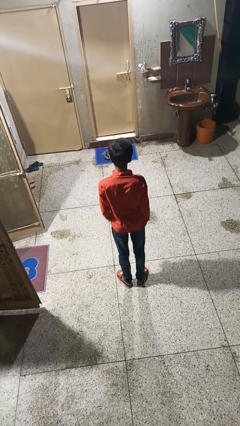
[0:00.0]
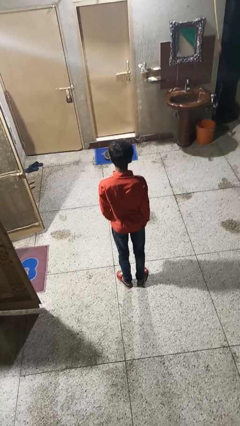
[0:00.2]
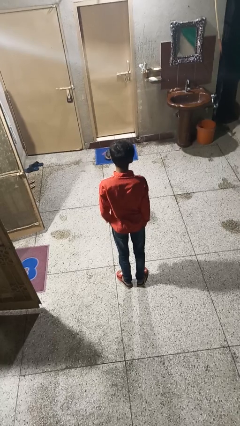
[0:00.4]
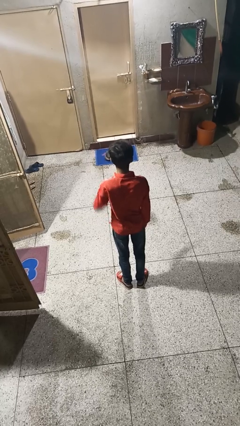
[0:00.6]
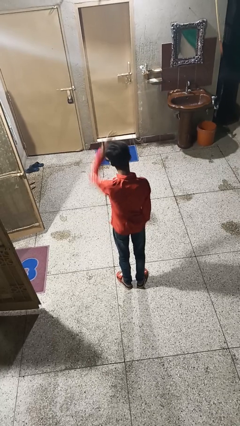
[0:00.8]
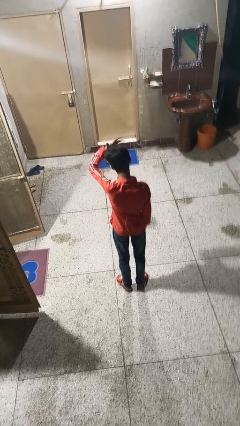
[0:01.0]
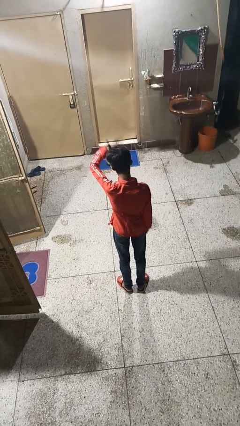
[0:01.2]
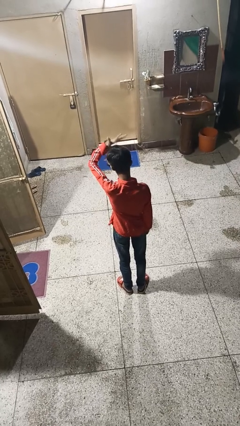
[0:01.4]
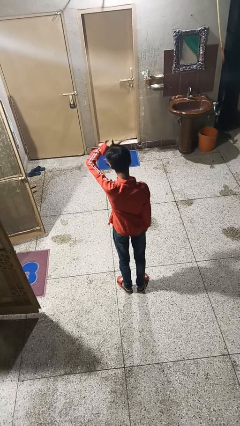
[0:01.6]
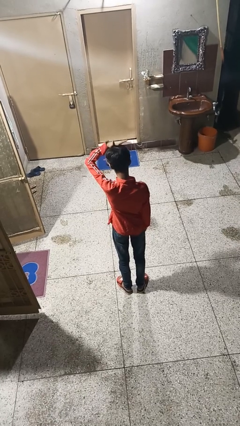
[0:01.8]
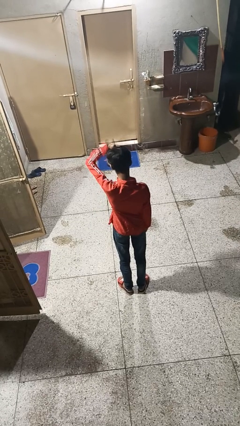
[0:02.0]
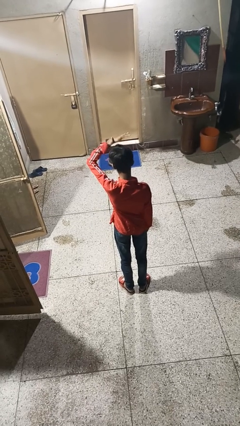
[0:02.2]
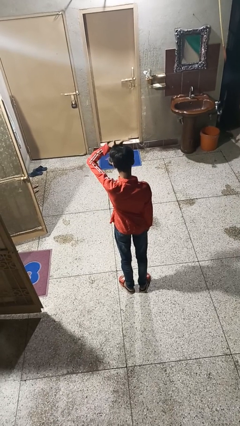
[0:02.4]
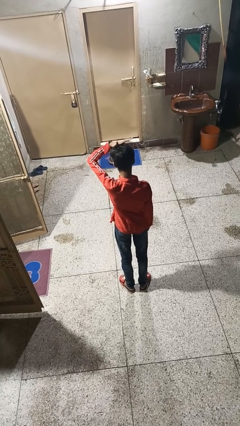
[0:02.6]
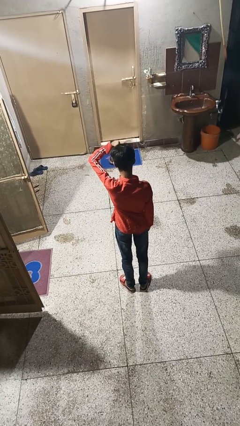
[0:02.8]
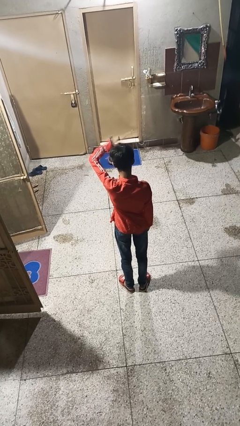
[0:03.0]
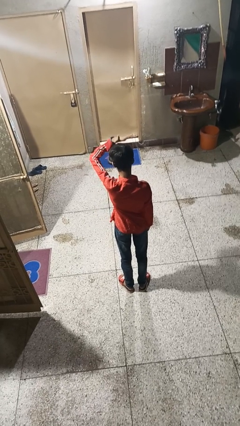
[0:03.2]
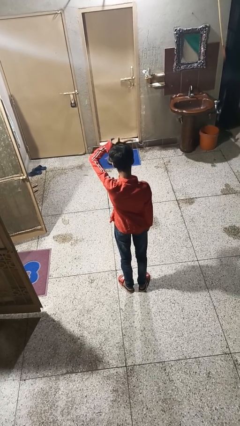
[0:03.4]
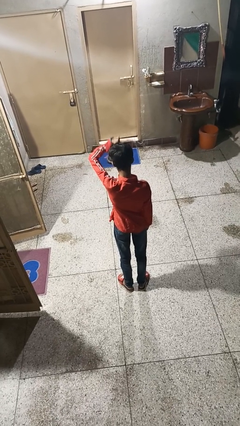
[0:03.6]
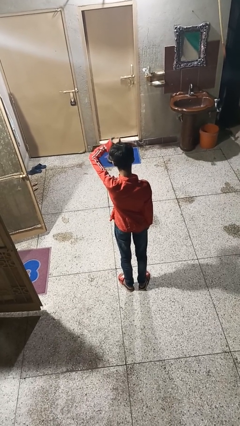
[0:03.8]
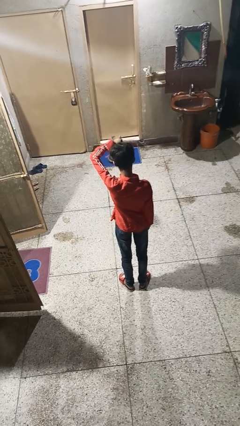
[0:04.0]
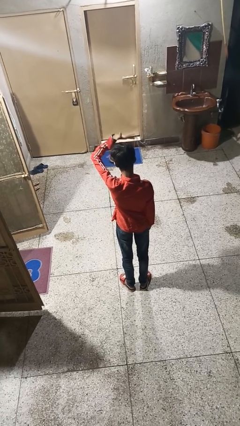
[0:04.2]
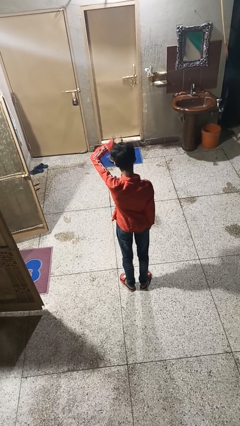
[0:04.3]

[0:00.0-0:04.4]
person pats head

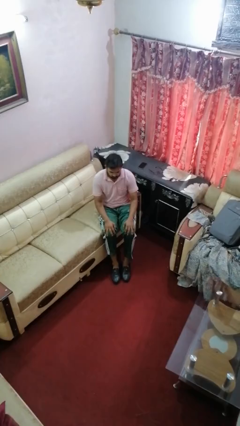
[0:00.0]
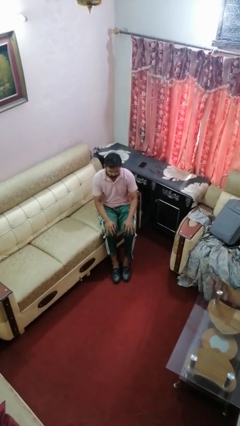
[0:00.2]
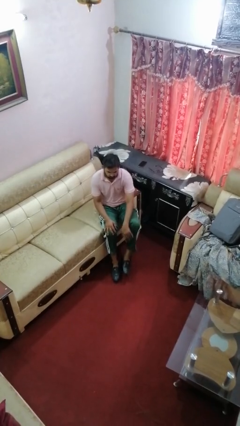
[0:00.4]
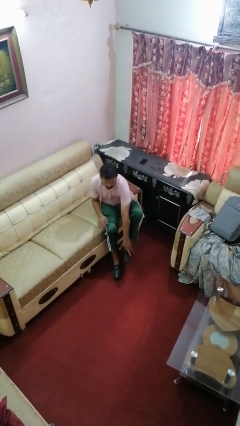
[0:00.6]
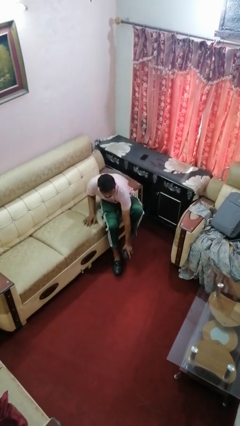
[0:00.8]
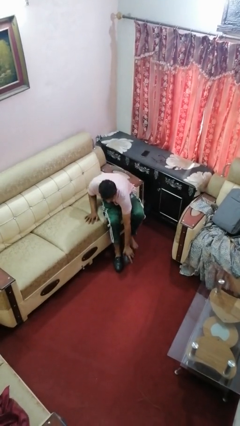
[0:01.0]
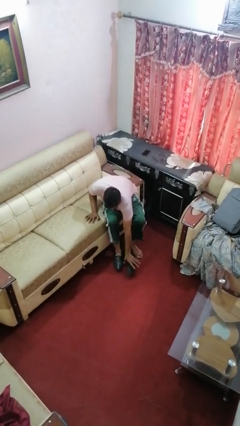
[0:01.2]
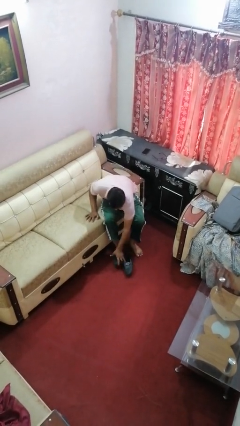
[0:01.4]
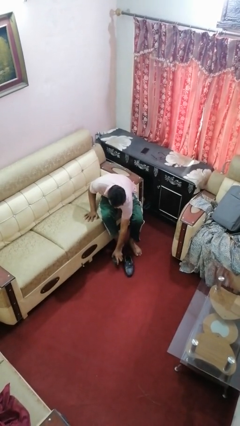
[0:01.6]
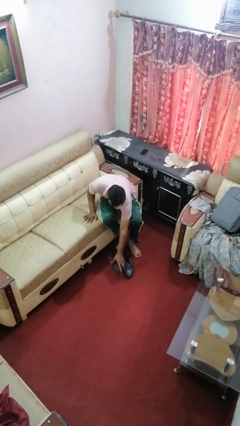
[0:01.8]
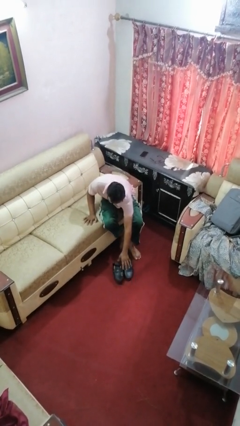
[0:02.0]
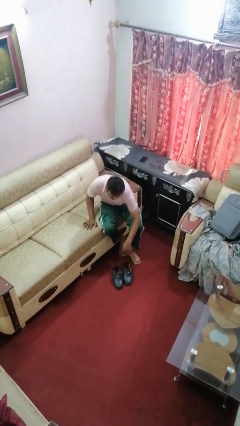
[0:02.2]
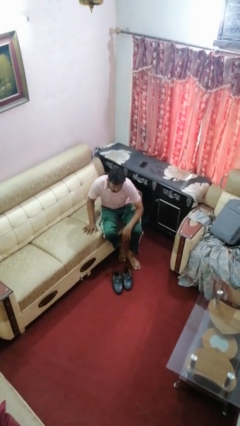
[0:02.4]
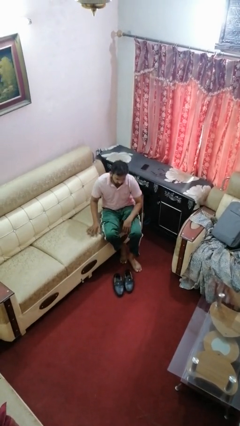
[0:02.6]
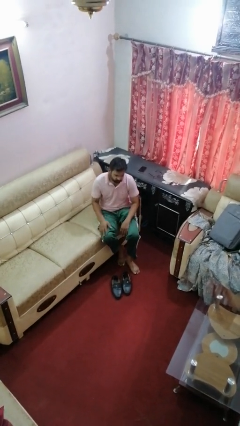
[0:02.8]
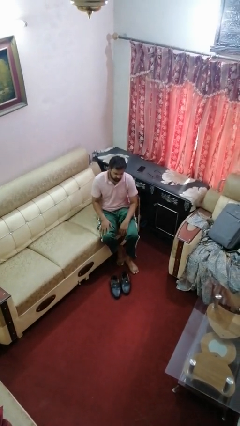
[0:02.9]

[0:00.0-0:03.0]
person takes off shoes

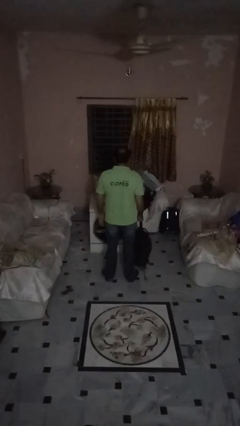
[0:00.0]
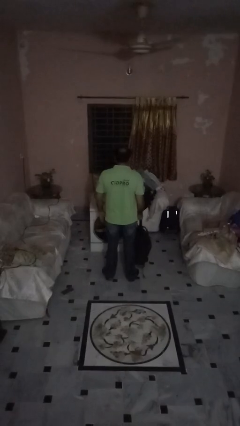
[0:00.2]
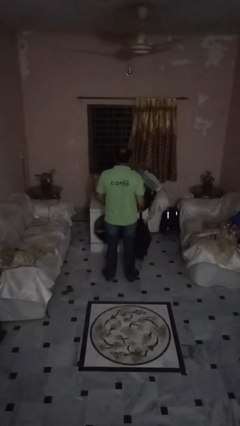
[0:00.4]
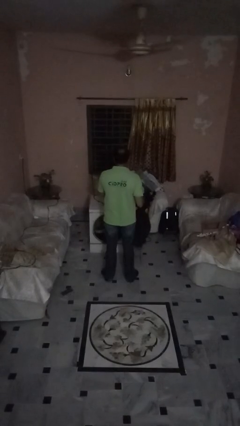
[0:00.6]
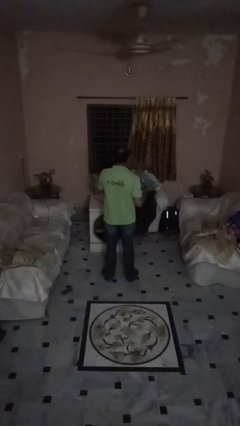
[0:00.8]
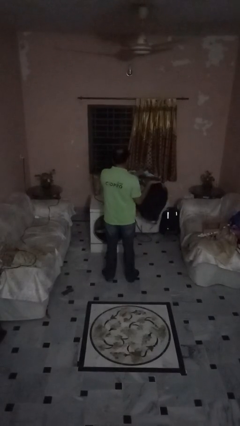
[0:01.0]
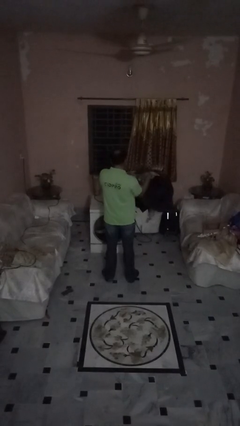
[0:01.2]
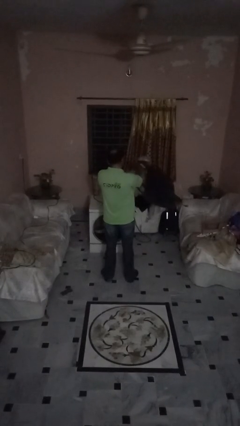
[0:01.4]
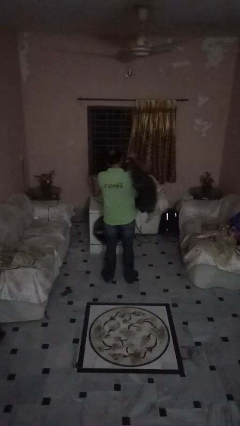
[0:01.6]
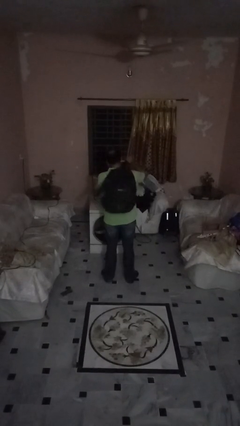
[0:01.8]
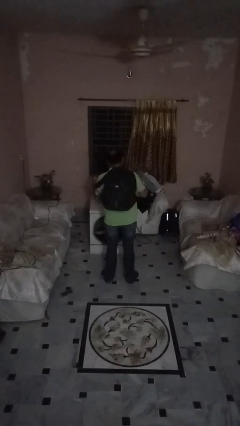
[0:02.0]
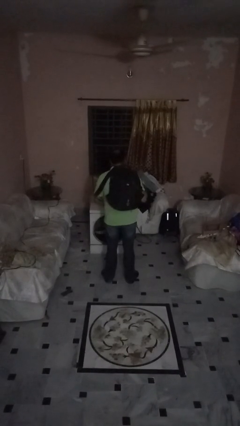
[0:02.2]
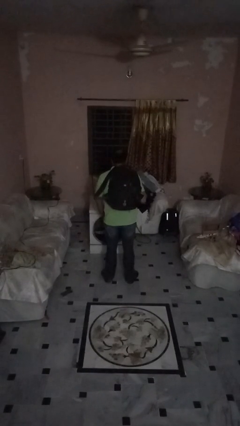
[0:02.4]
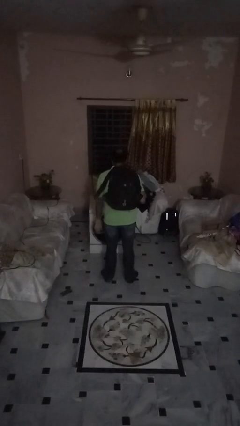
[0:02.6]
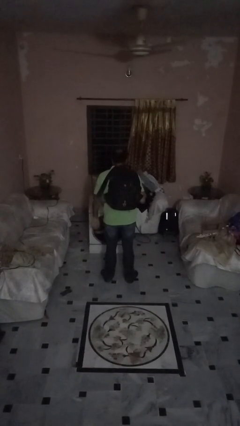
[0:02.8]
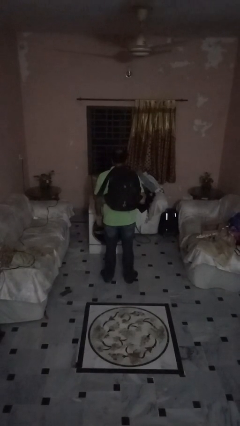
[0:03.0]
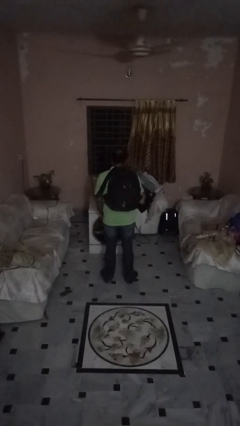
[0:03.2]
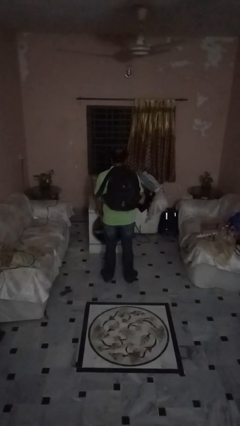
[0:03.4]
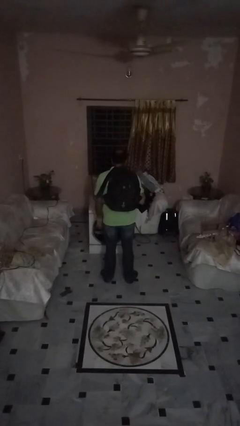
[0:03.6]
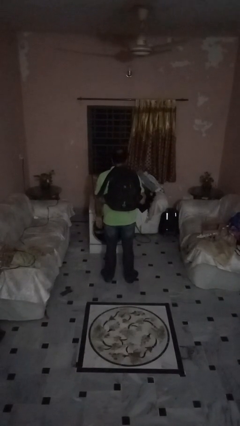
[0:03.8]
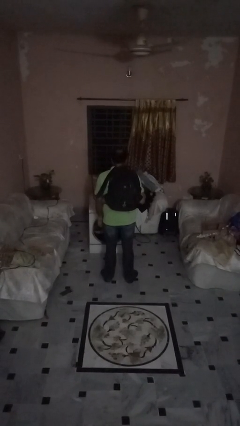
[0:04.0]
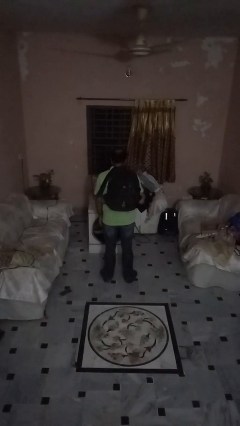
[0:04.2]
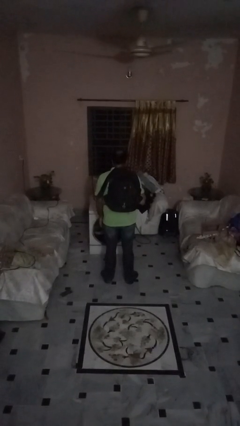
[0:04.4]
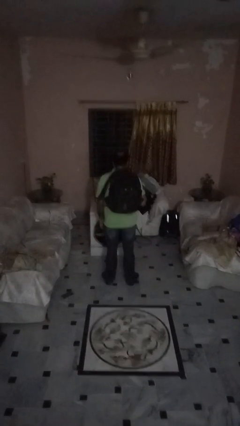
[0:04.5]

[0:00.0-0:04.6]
person puts on backpack

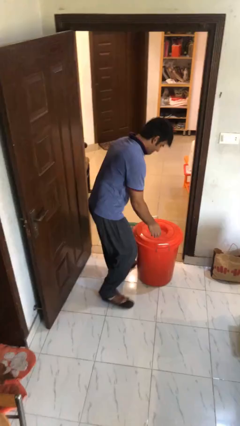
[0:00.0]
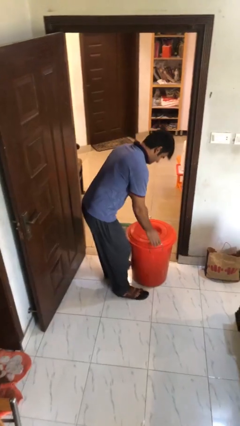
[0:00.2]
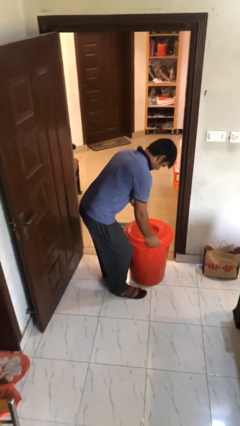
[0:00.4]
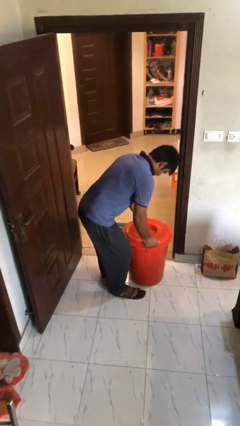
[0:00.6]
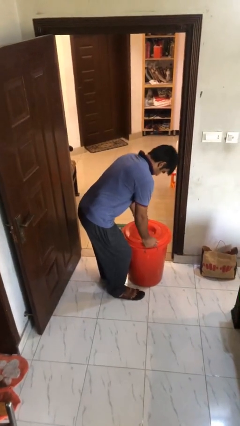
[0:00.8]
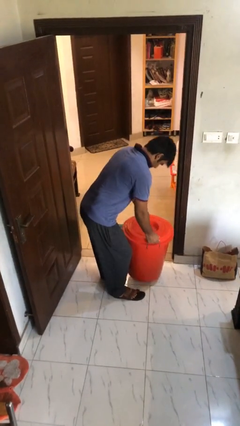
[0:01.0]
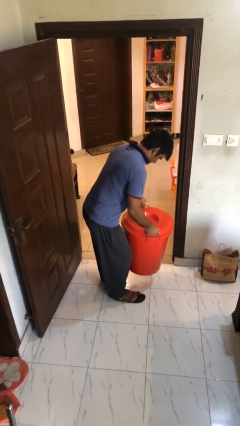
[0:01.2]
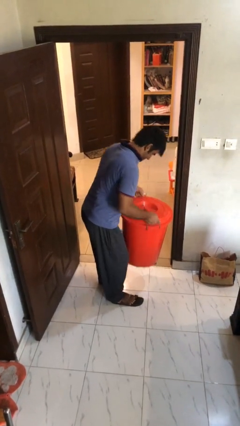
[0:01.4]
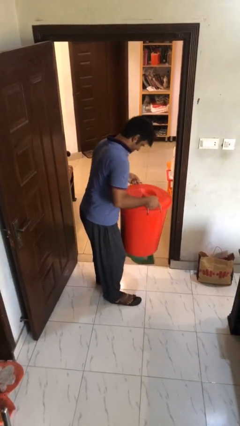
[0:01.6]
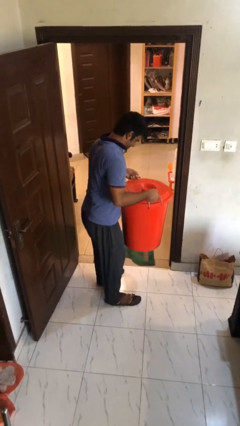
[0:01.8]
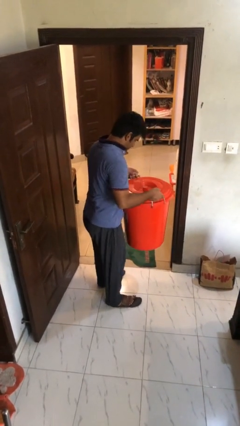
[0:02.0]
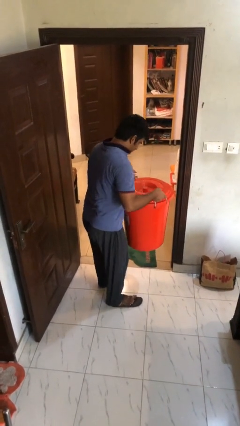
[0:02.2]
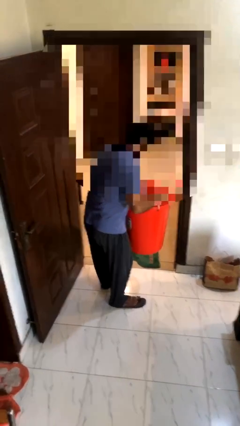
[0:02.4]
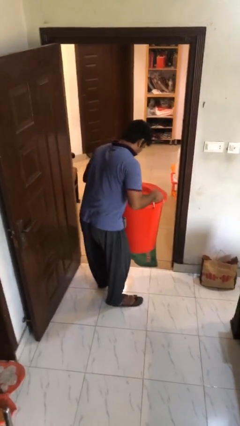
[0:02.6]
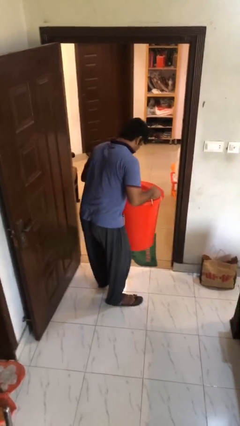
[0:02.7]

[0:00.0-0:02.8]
person picks up object from floor

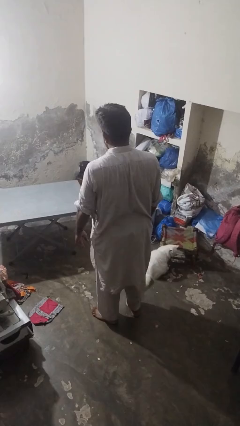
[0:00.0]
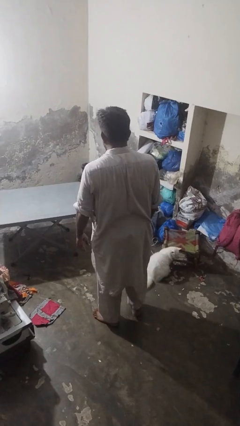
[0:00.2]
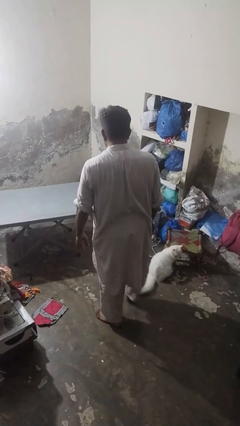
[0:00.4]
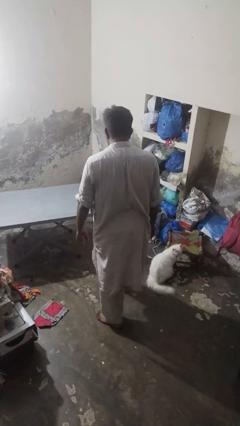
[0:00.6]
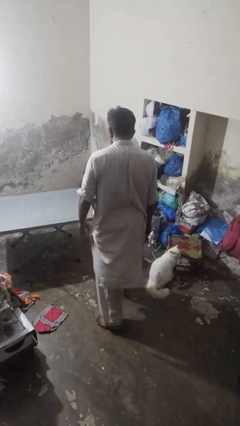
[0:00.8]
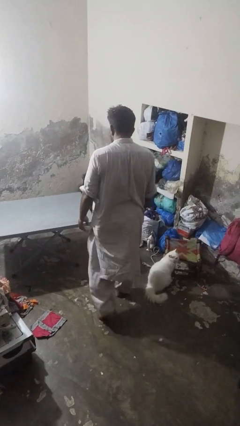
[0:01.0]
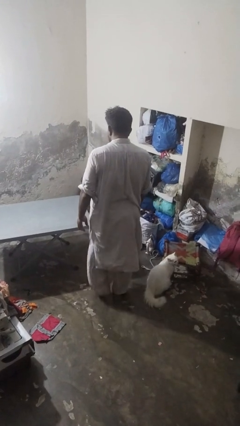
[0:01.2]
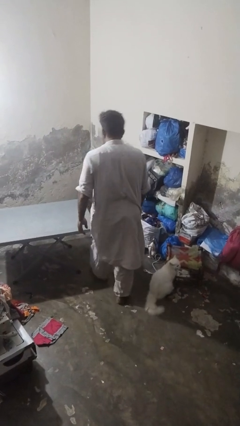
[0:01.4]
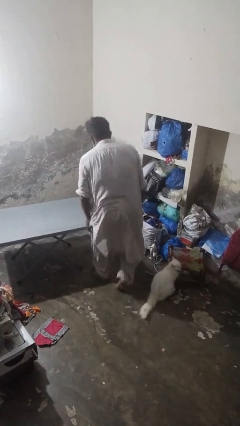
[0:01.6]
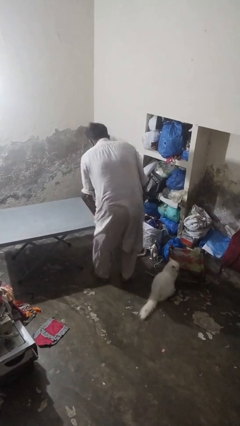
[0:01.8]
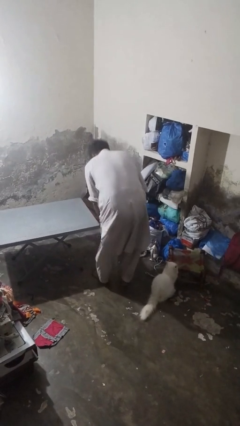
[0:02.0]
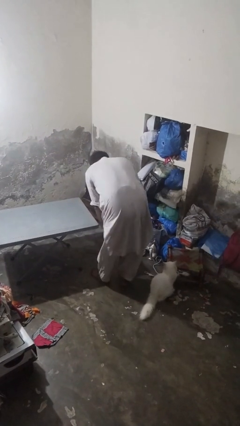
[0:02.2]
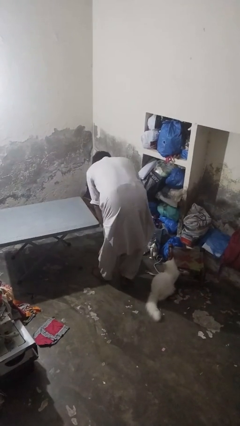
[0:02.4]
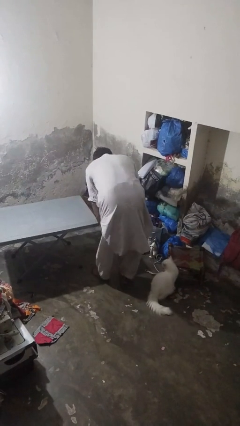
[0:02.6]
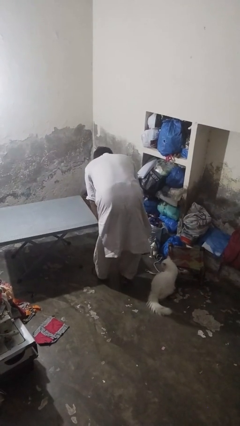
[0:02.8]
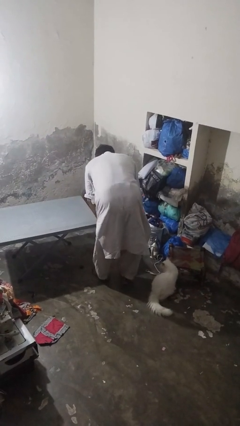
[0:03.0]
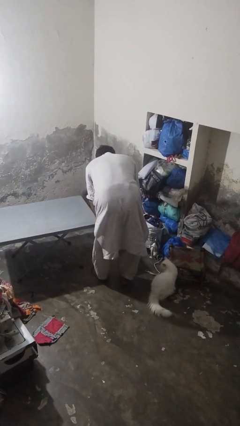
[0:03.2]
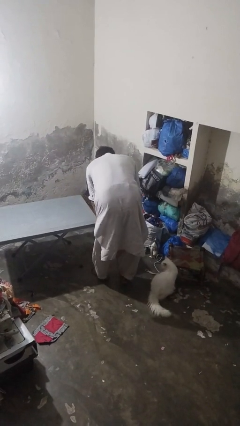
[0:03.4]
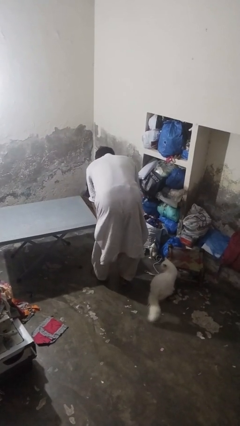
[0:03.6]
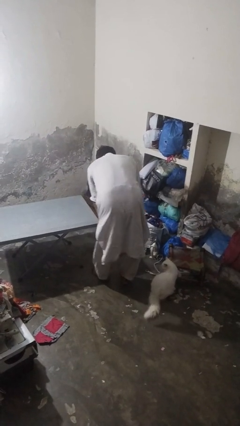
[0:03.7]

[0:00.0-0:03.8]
person bumps into table
